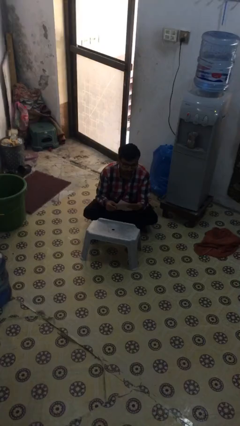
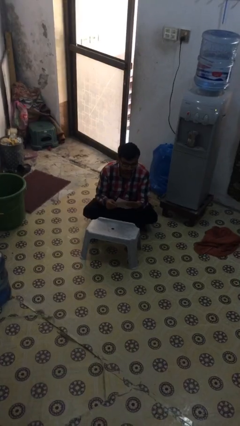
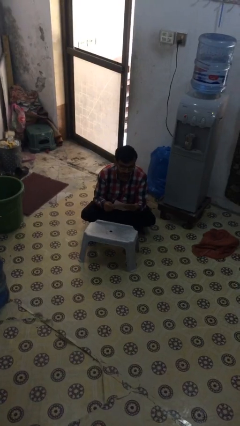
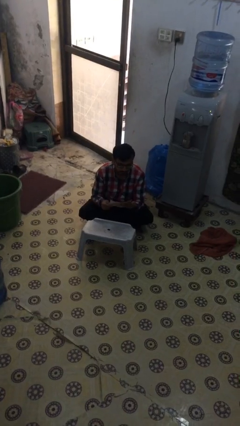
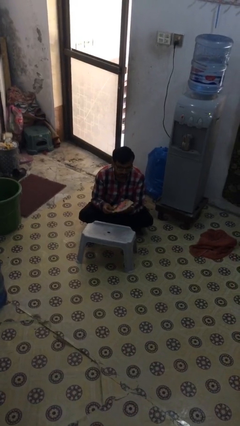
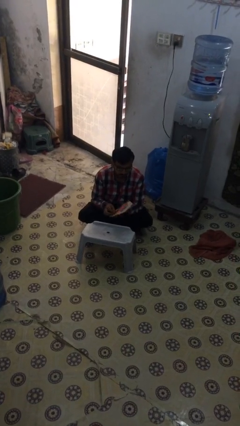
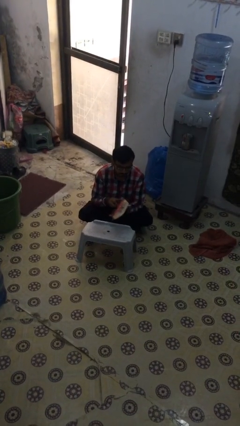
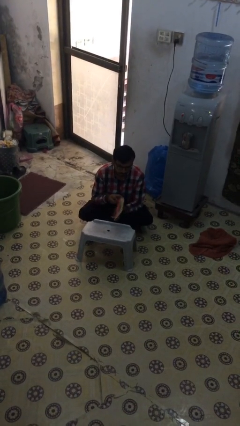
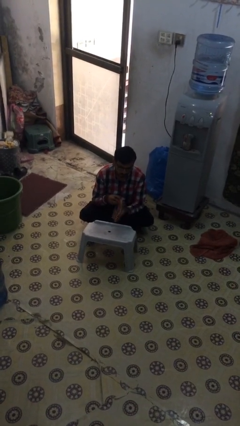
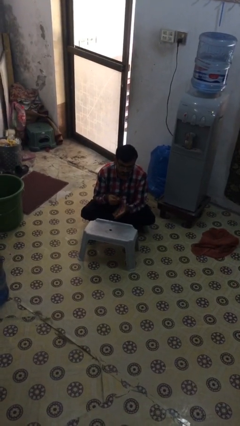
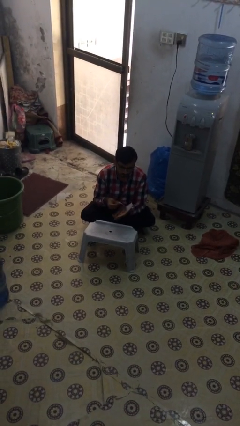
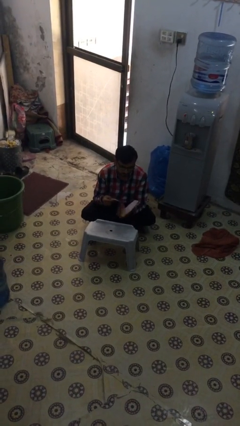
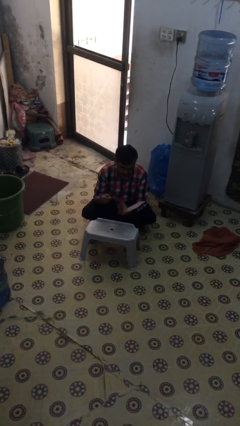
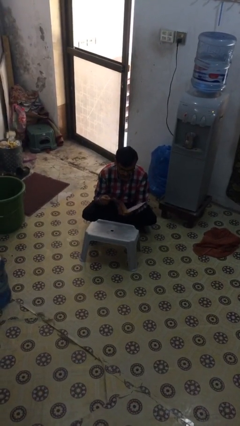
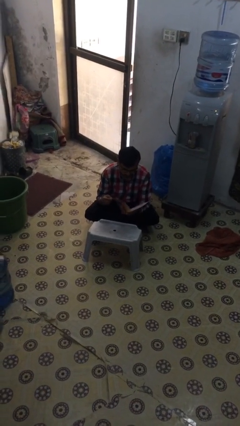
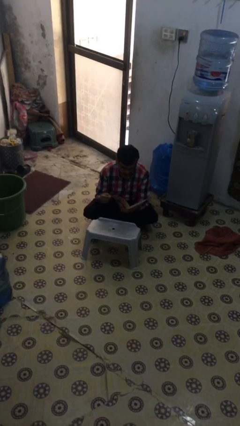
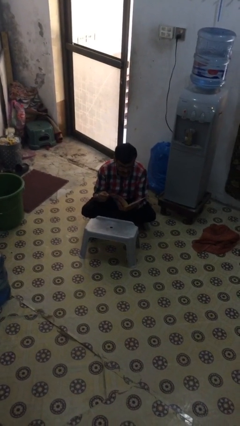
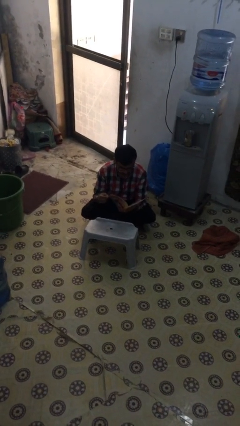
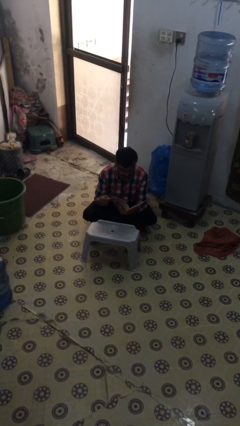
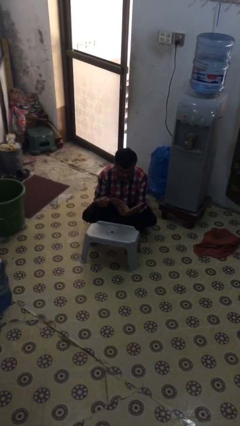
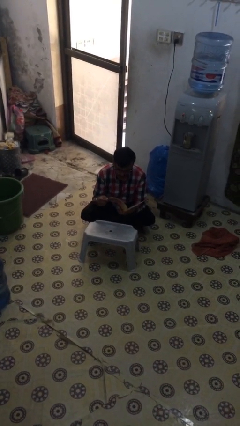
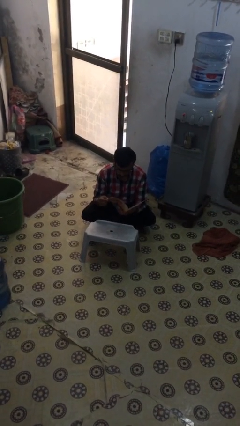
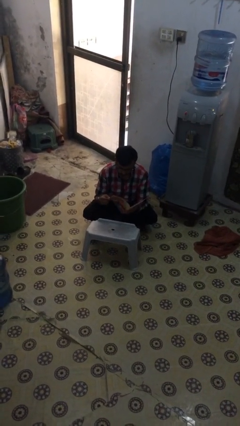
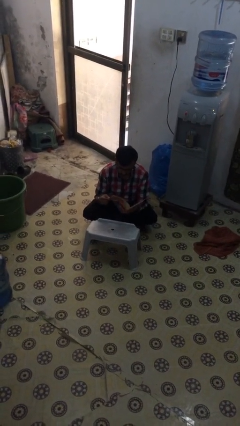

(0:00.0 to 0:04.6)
person reads document

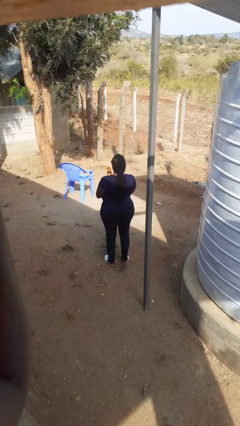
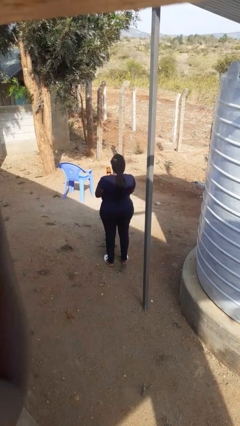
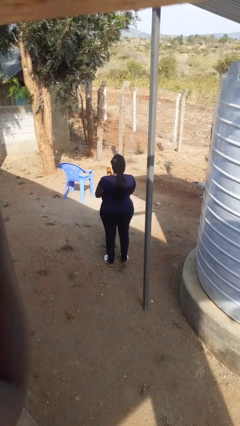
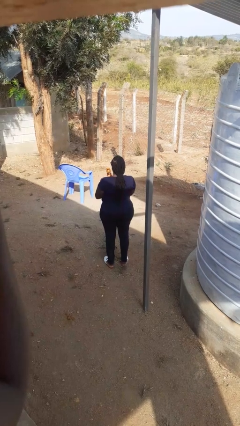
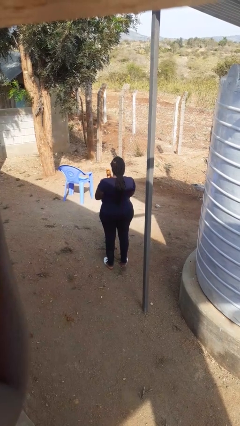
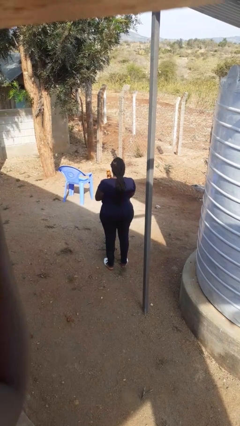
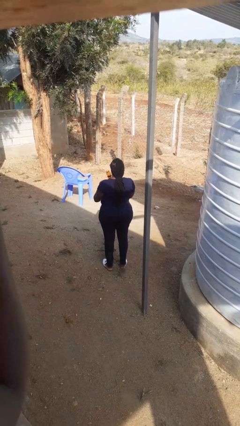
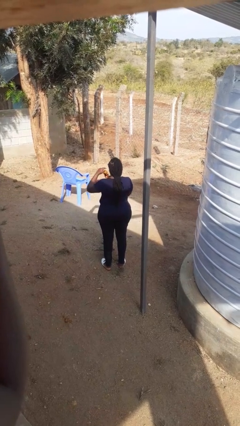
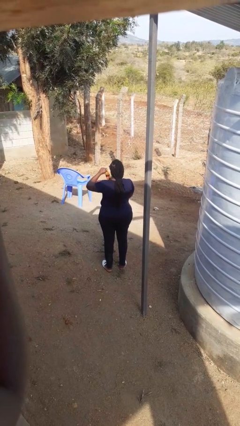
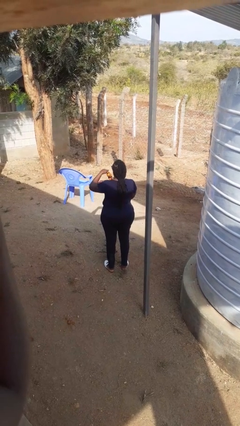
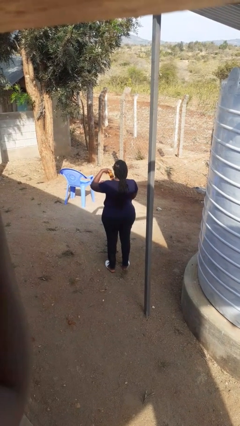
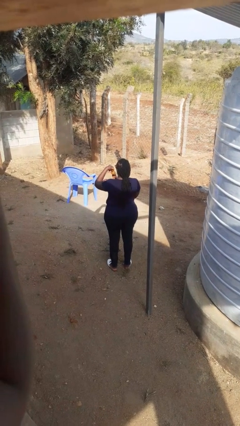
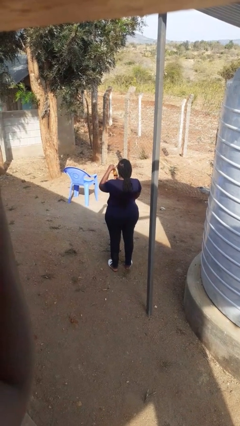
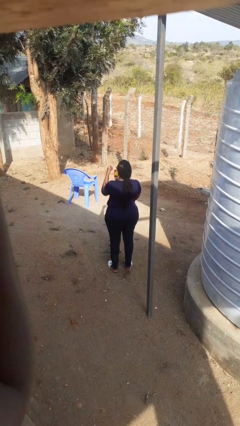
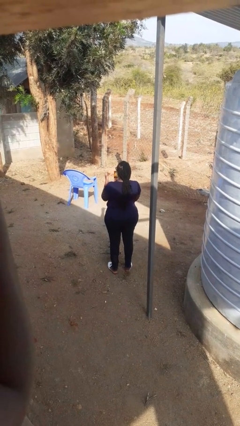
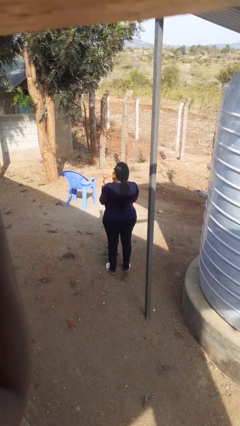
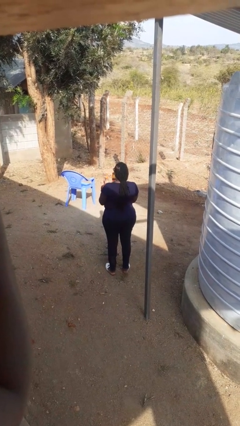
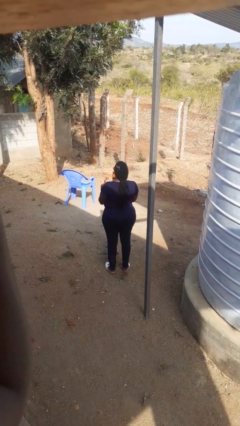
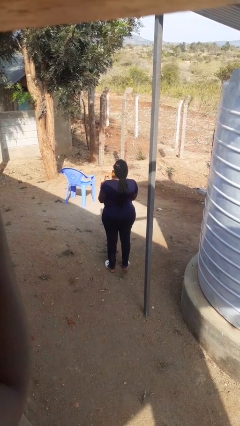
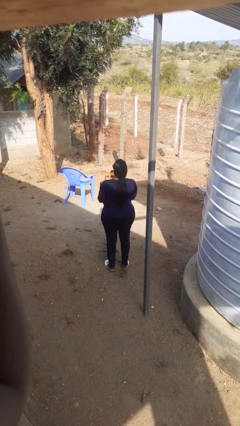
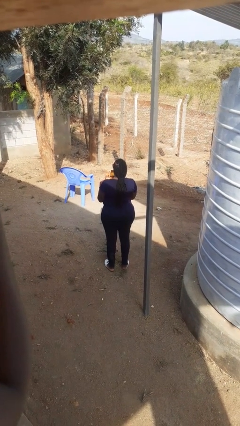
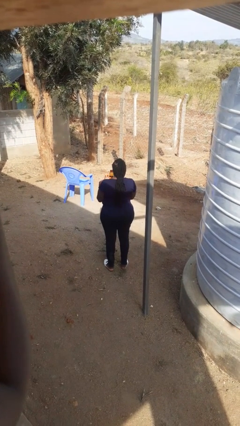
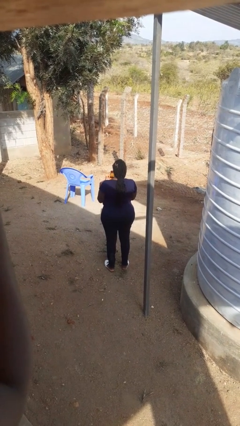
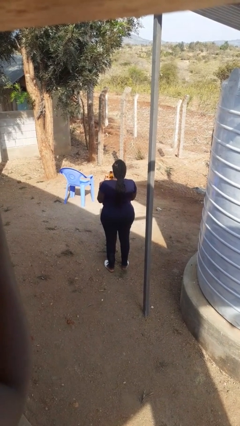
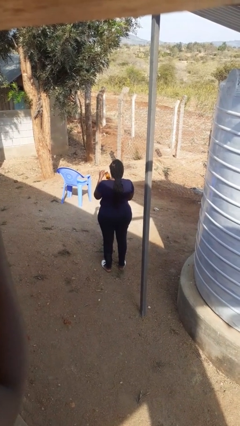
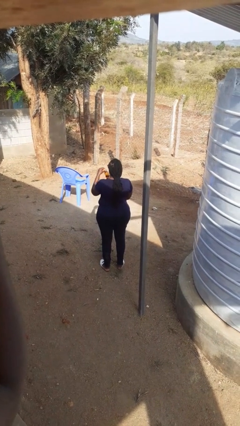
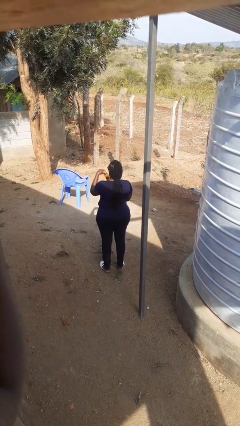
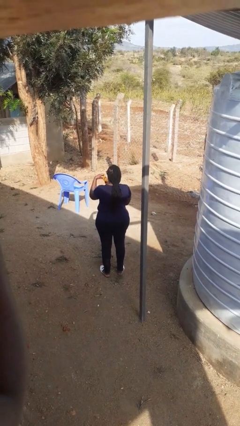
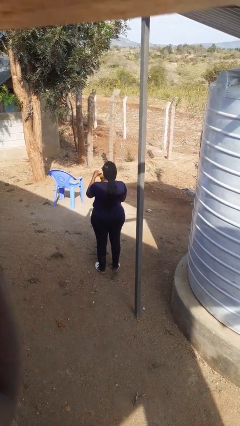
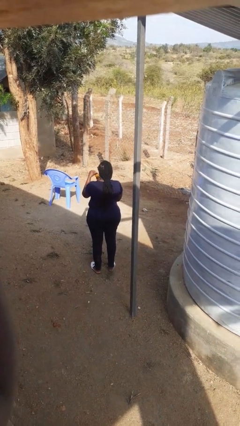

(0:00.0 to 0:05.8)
person opens jar

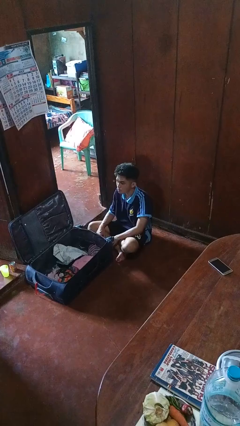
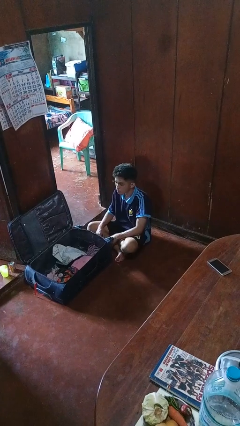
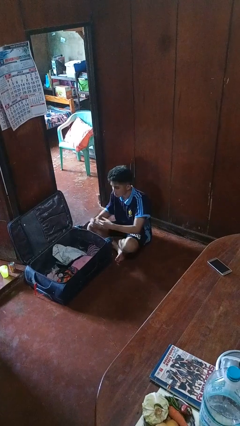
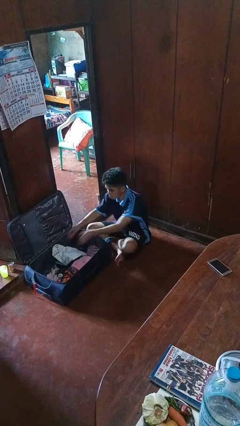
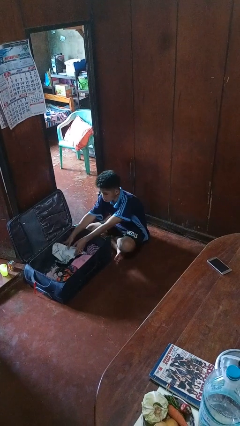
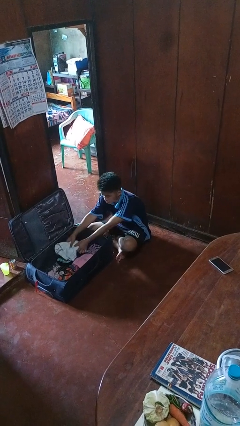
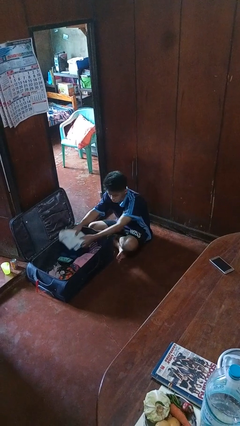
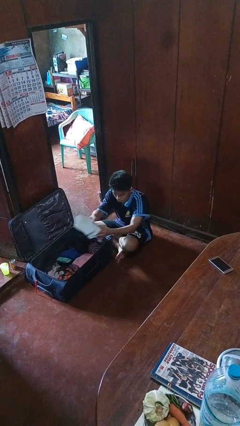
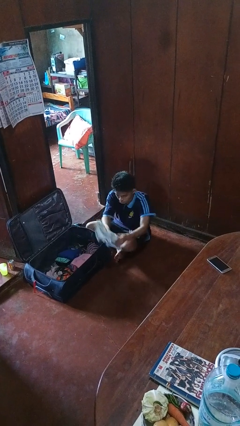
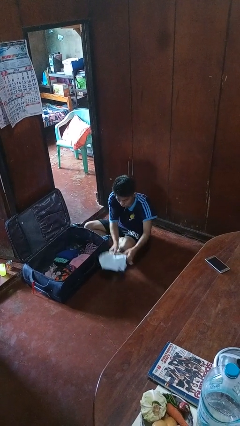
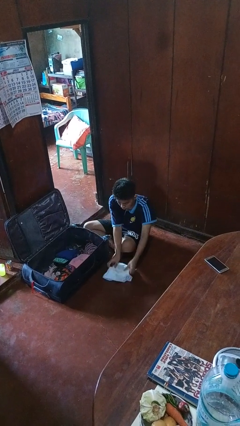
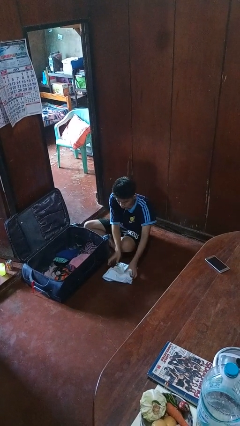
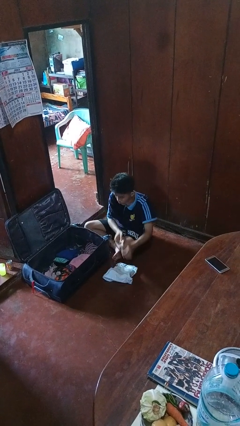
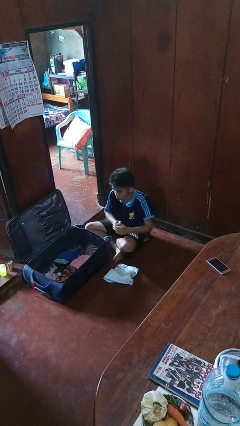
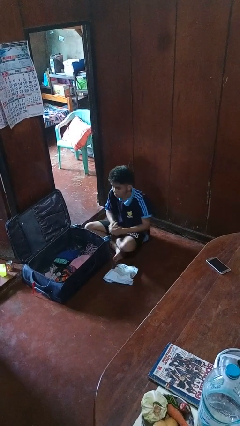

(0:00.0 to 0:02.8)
person unloads clothes from suitcase

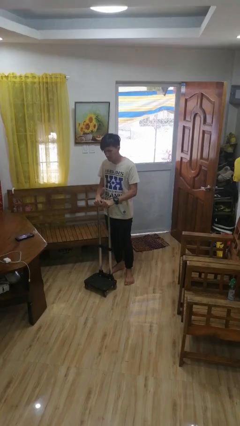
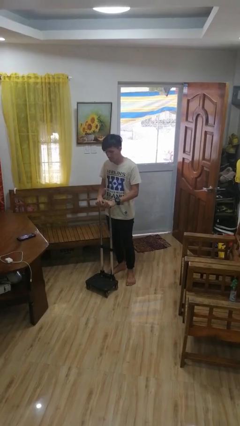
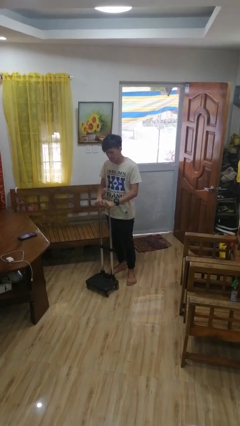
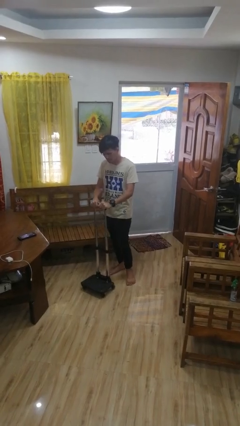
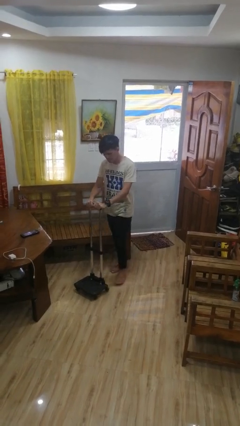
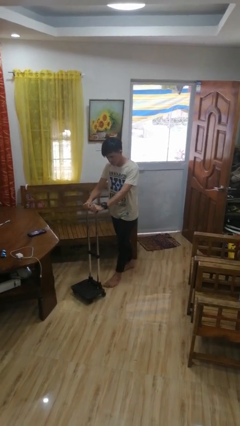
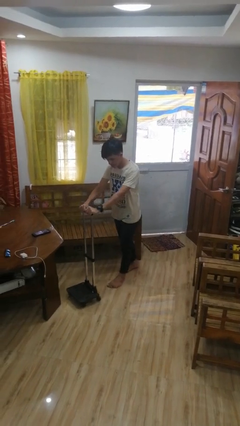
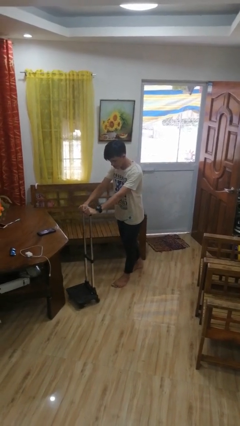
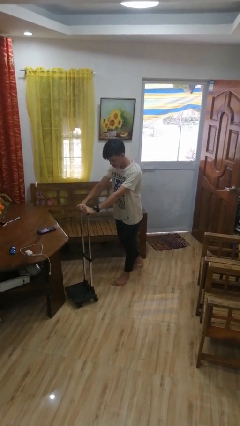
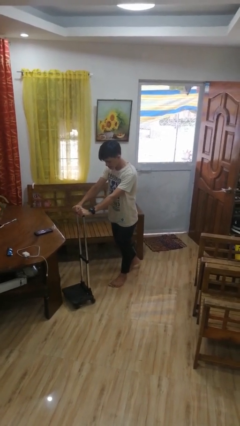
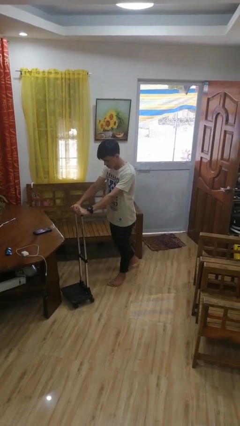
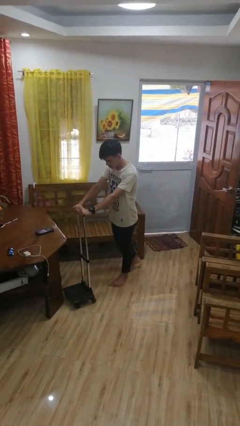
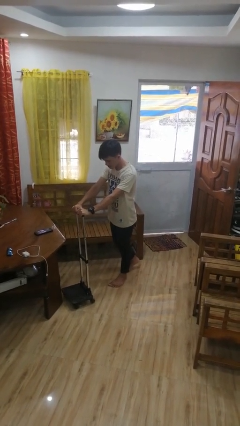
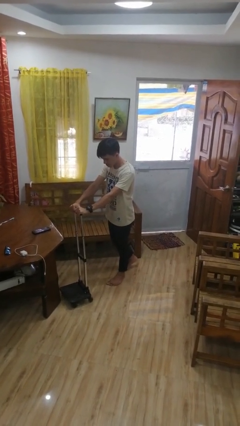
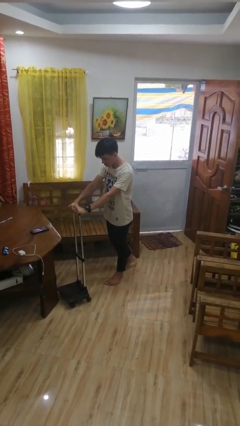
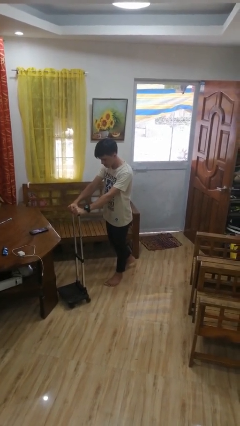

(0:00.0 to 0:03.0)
person pushes wheeled cart

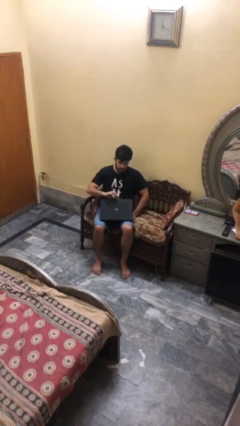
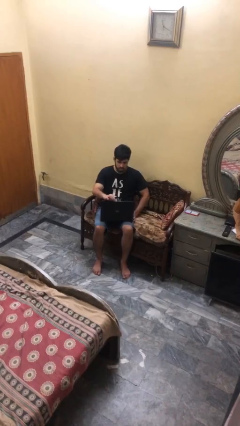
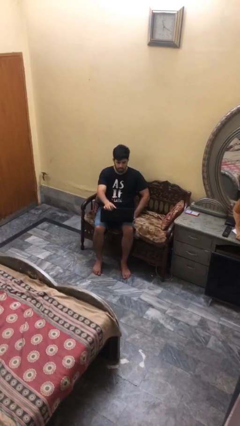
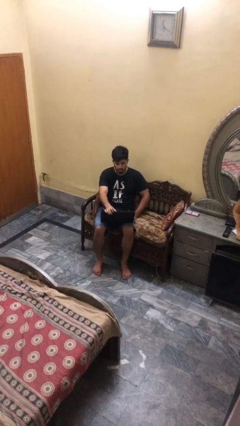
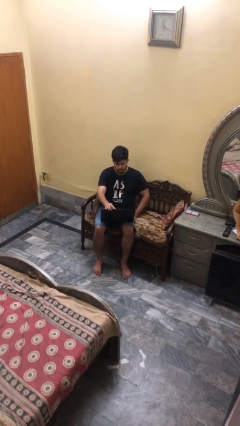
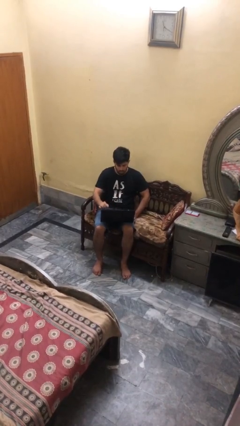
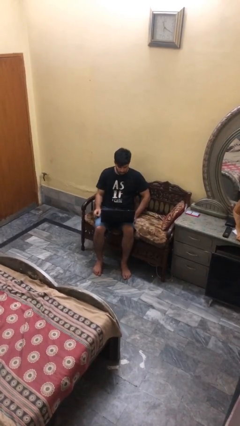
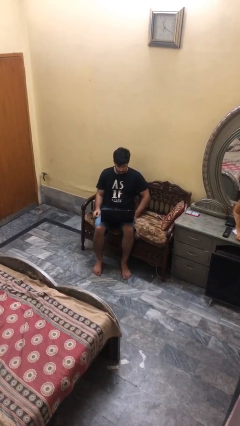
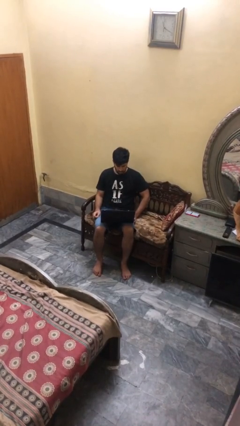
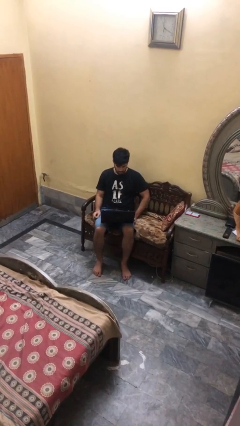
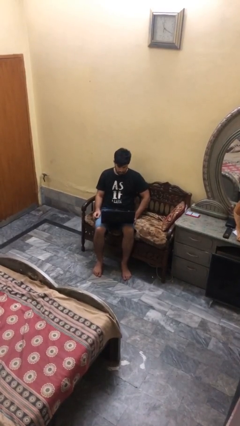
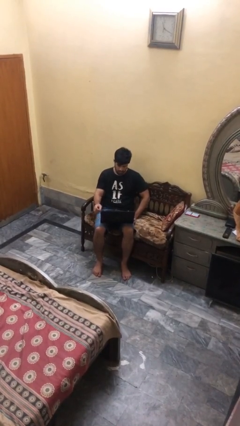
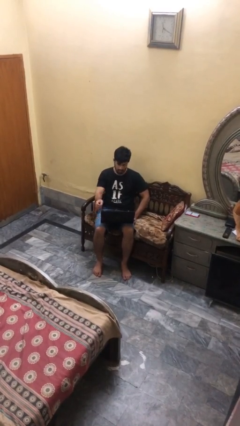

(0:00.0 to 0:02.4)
person opens laptop
